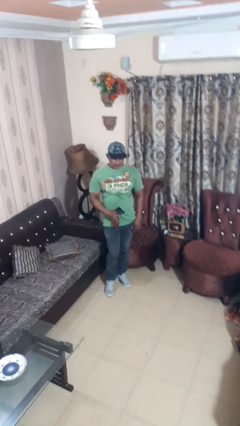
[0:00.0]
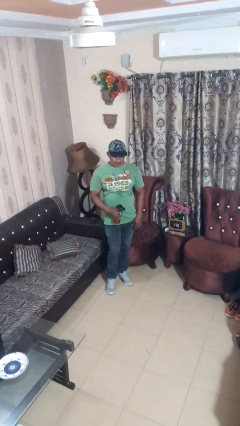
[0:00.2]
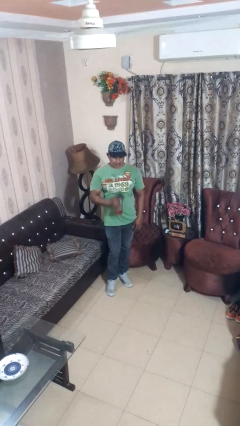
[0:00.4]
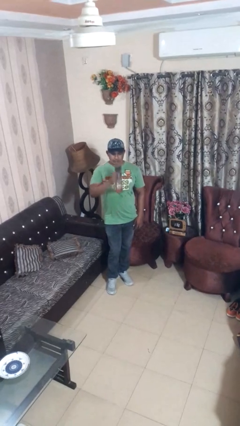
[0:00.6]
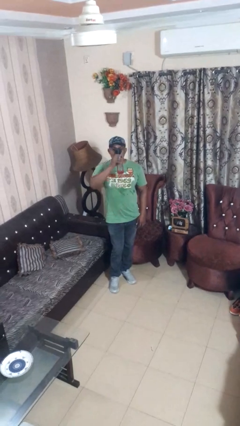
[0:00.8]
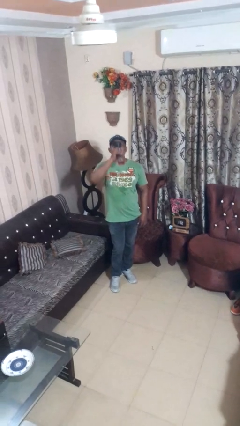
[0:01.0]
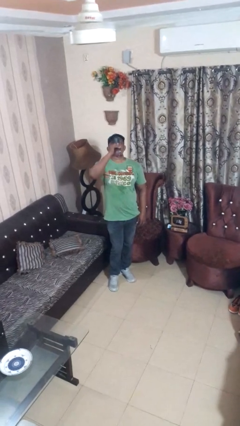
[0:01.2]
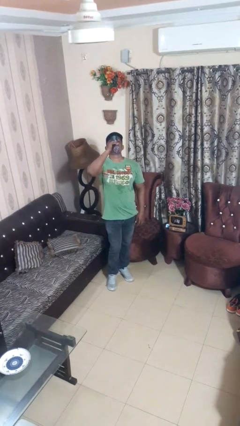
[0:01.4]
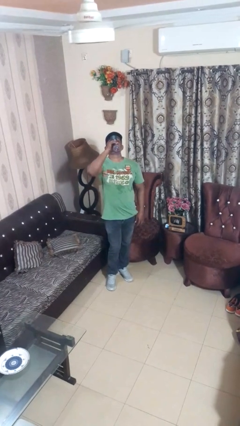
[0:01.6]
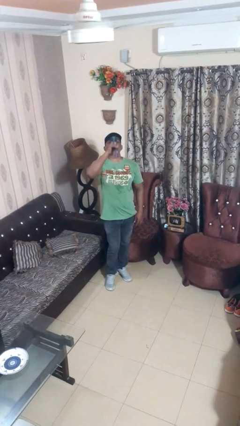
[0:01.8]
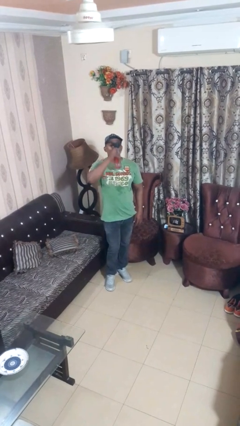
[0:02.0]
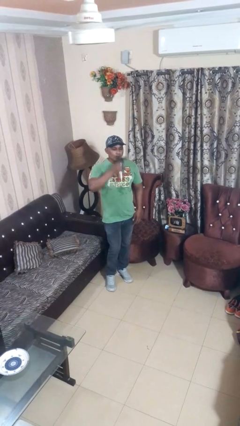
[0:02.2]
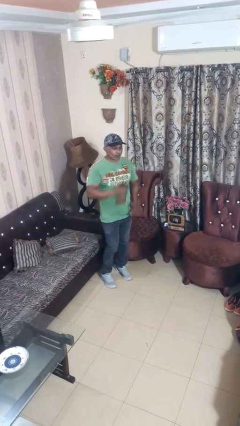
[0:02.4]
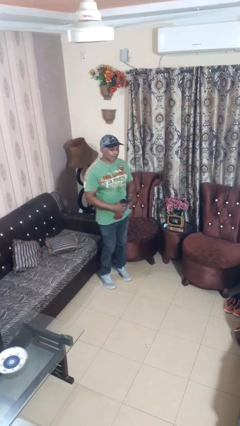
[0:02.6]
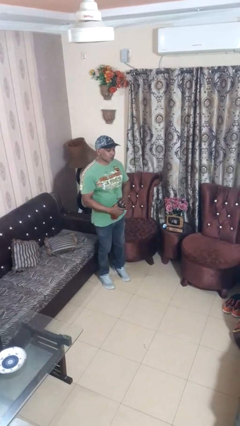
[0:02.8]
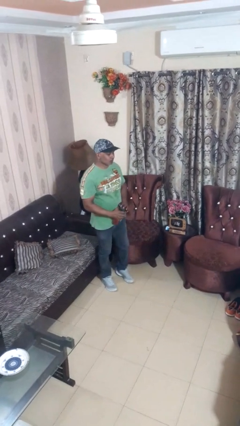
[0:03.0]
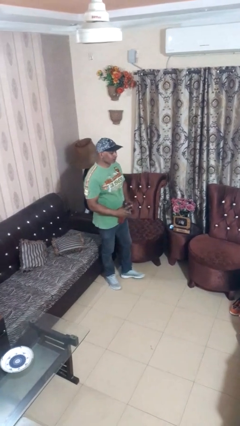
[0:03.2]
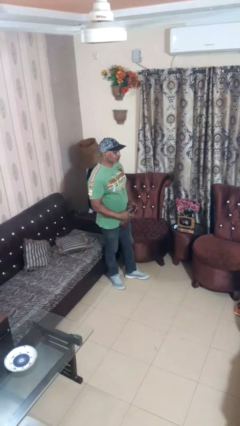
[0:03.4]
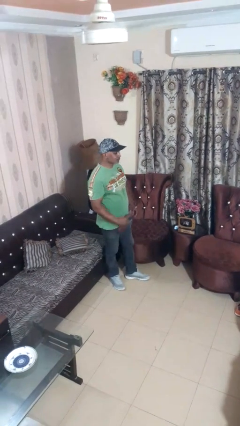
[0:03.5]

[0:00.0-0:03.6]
person drinks from beverage can

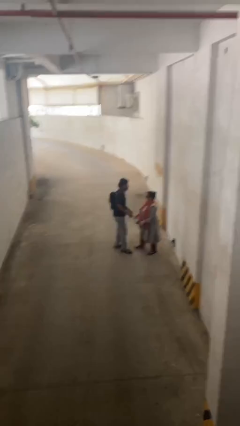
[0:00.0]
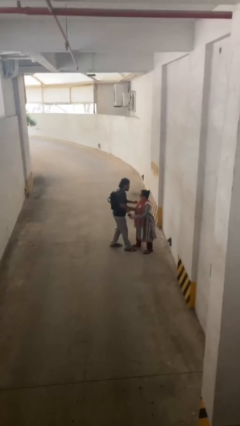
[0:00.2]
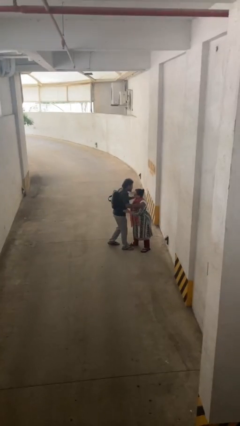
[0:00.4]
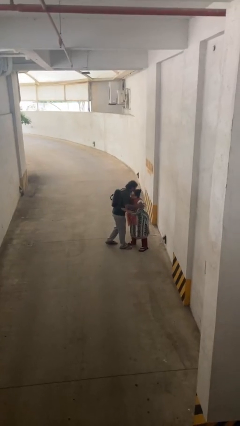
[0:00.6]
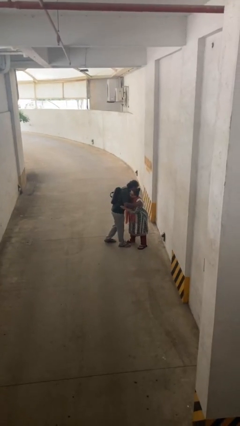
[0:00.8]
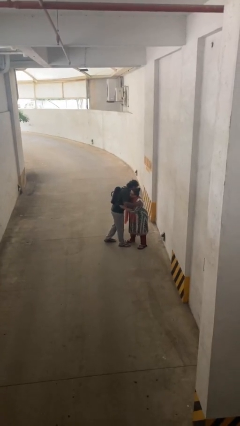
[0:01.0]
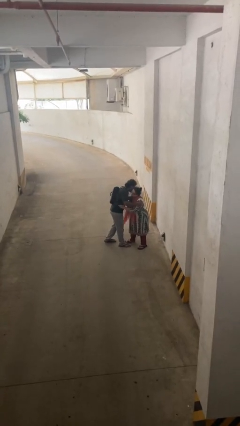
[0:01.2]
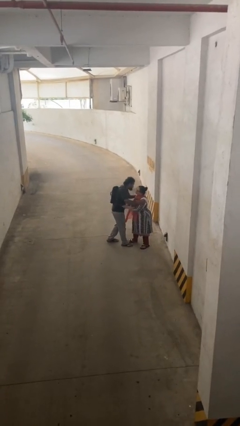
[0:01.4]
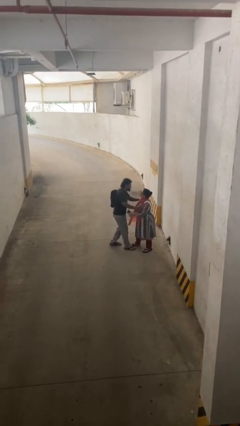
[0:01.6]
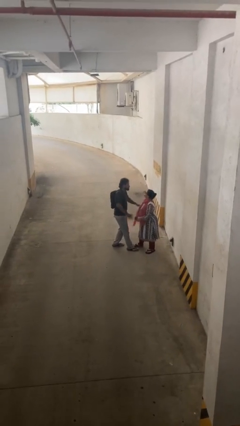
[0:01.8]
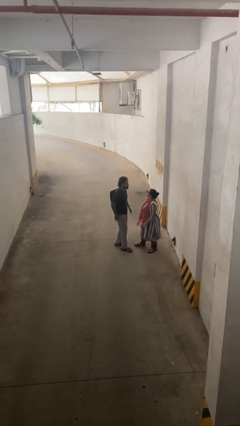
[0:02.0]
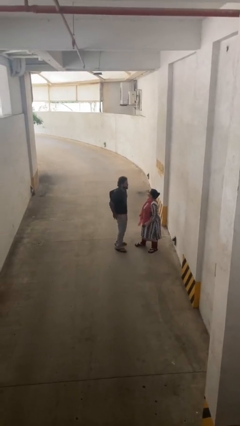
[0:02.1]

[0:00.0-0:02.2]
person embraces person

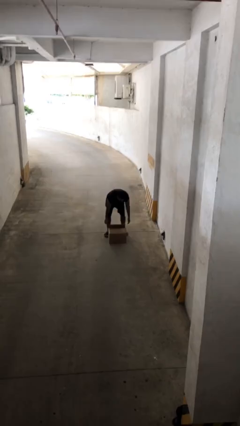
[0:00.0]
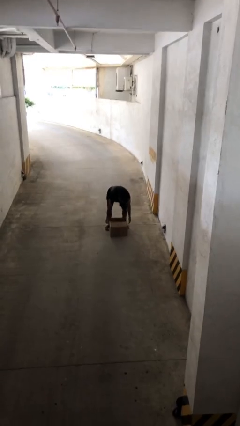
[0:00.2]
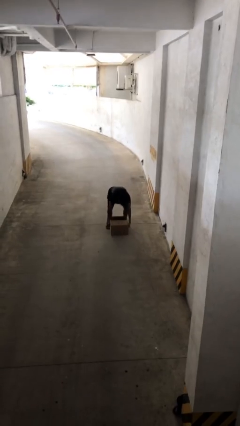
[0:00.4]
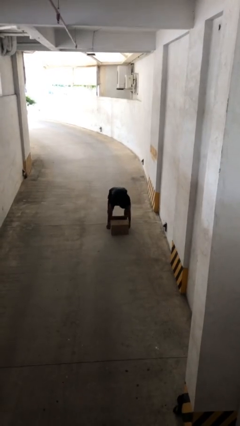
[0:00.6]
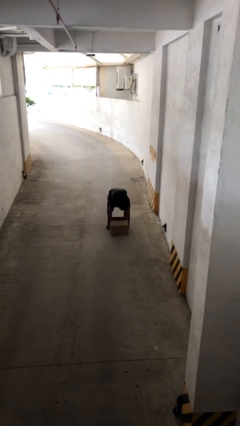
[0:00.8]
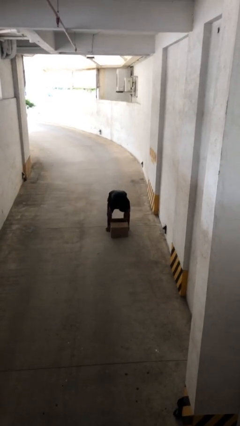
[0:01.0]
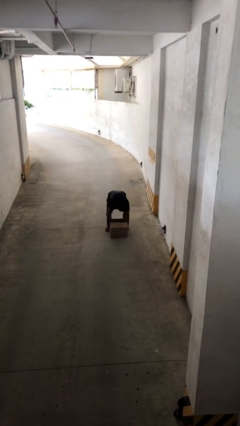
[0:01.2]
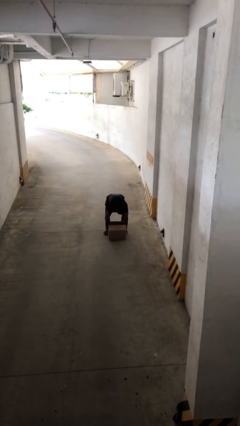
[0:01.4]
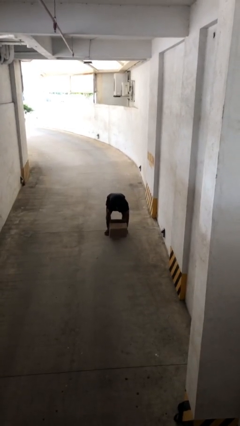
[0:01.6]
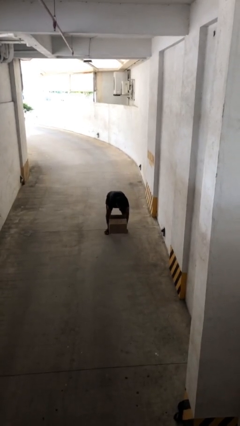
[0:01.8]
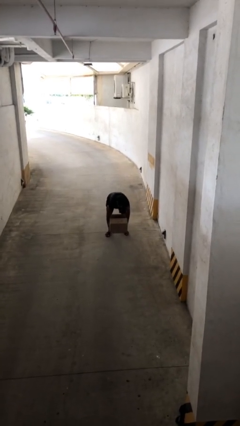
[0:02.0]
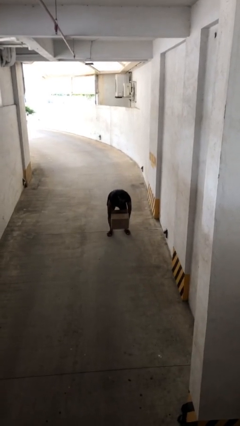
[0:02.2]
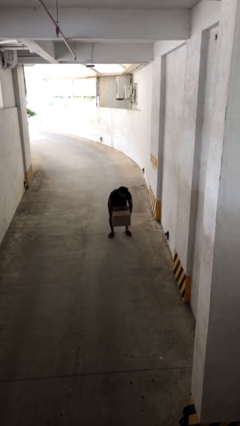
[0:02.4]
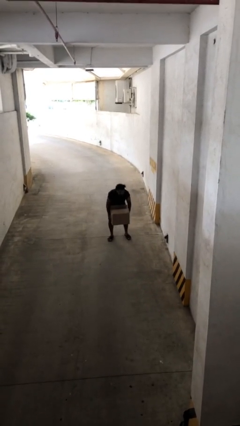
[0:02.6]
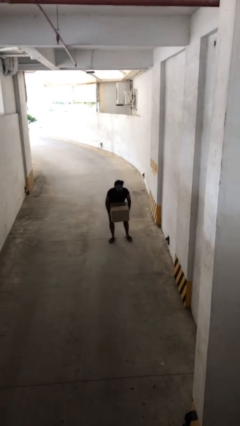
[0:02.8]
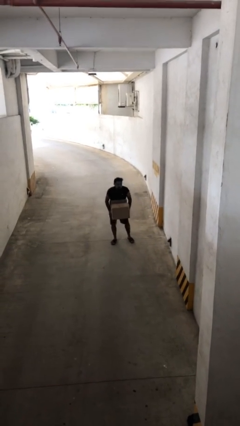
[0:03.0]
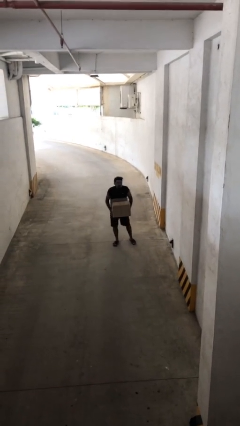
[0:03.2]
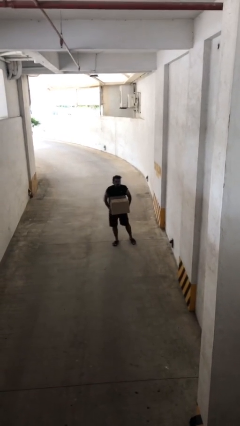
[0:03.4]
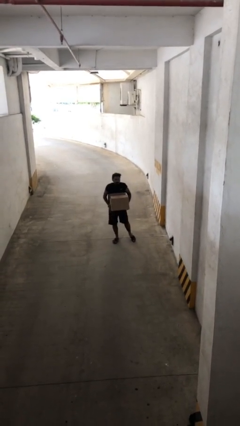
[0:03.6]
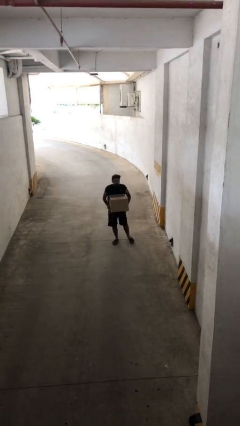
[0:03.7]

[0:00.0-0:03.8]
person picks up object from floor

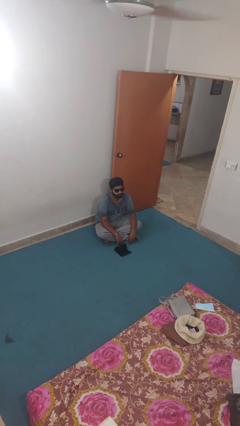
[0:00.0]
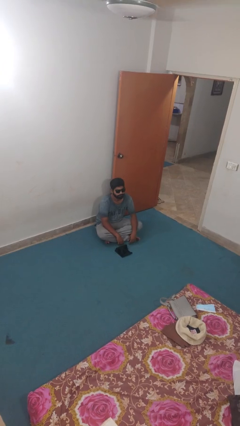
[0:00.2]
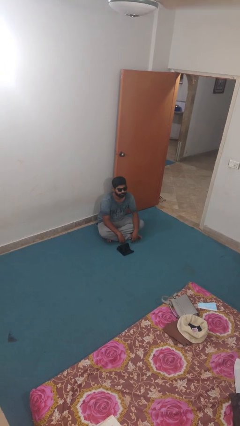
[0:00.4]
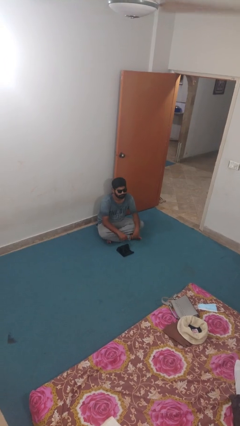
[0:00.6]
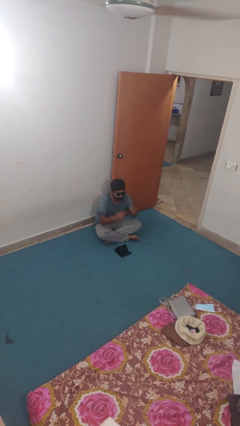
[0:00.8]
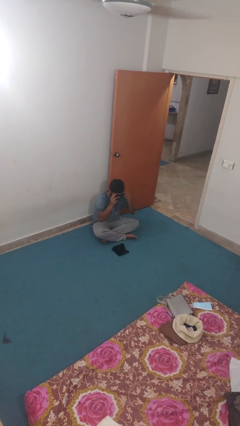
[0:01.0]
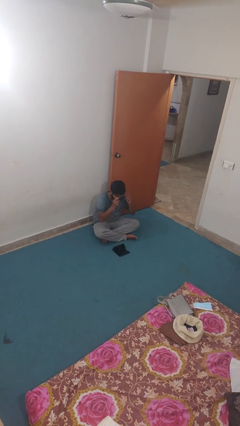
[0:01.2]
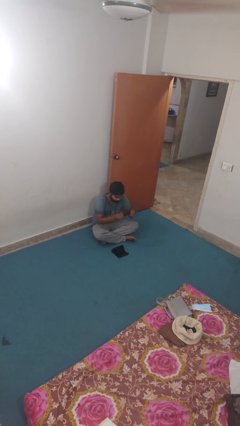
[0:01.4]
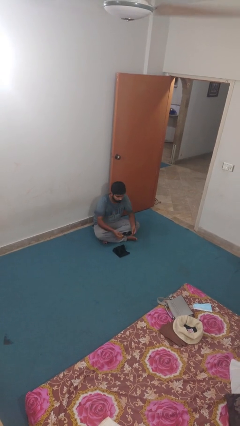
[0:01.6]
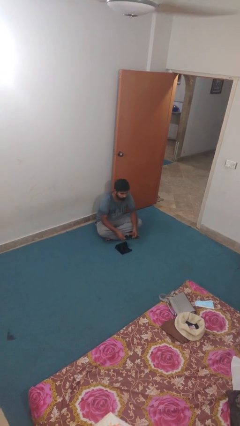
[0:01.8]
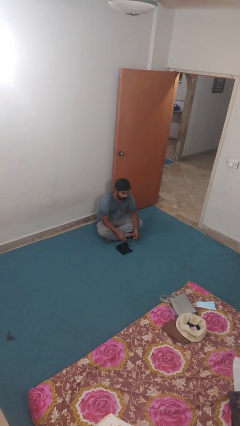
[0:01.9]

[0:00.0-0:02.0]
person takes off sunglasses

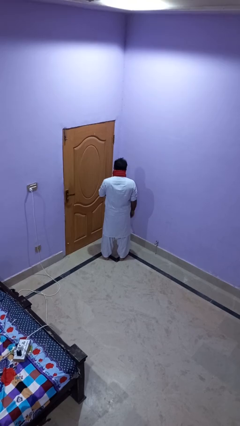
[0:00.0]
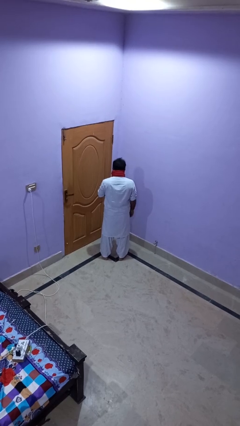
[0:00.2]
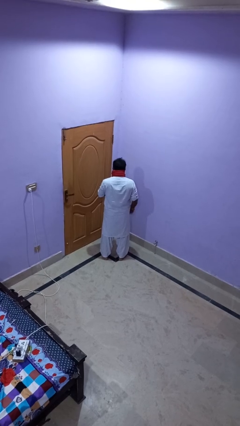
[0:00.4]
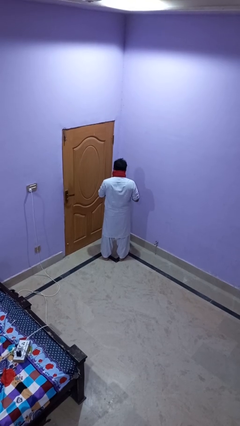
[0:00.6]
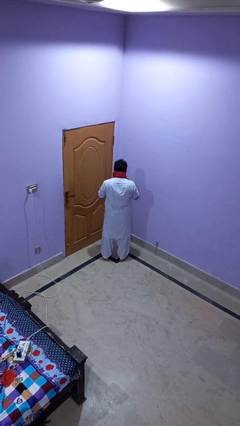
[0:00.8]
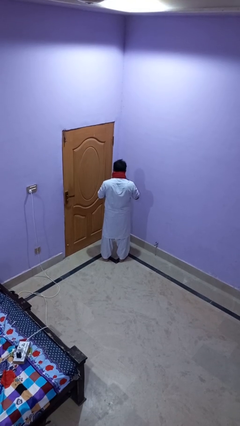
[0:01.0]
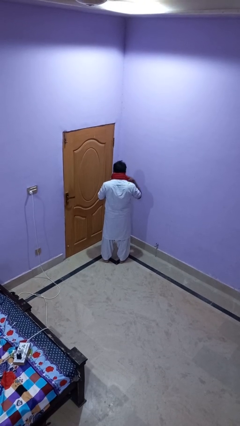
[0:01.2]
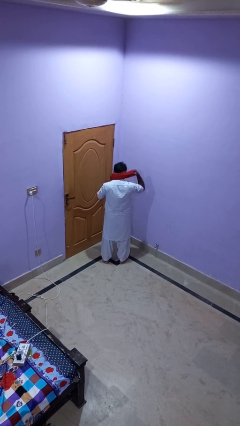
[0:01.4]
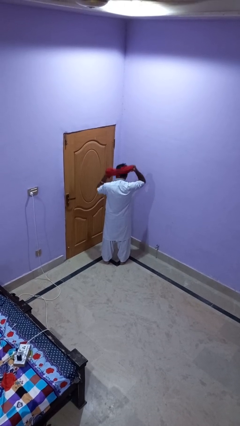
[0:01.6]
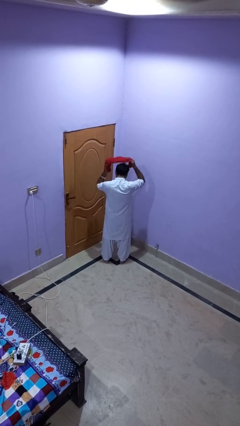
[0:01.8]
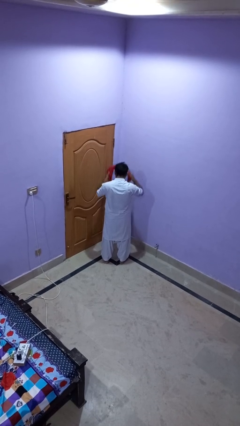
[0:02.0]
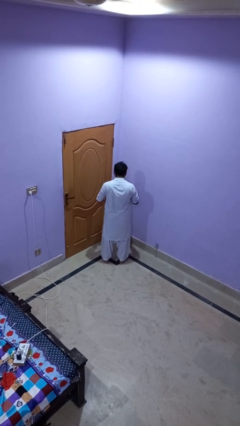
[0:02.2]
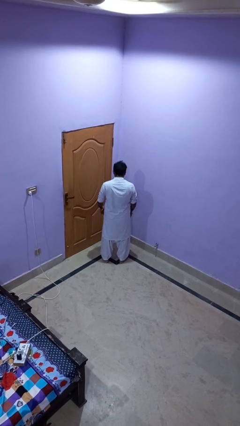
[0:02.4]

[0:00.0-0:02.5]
person takes off scarf

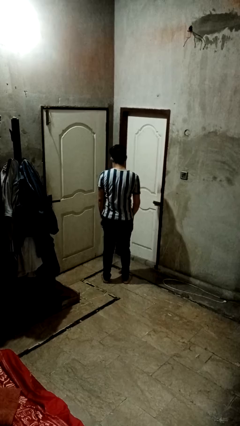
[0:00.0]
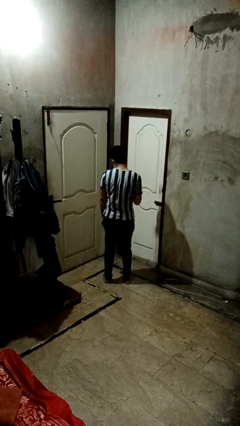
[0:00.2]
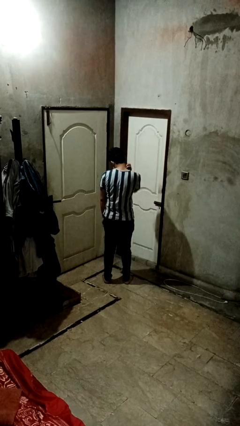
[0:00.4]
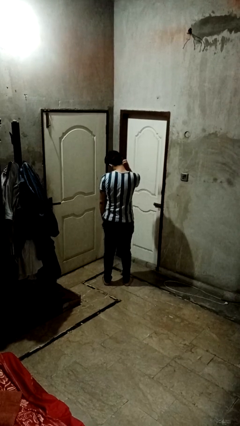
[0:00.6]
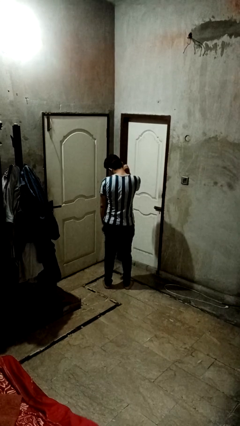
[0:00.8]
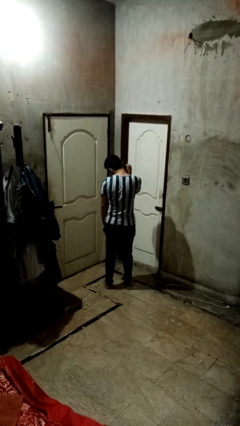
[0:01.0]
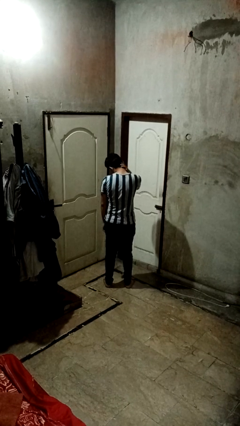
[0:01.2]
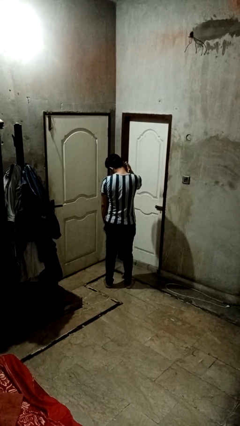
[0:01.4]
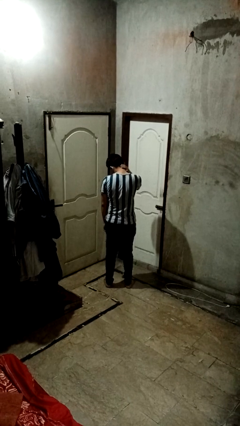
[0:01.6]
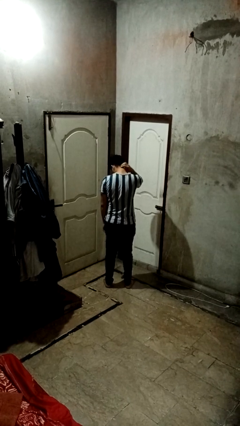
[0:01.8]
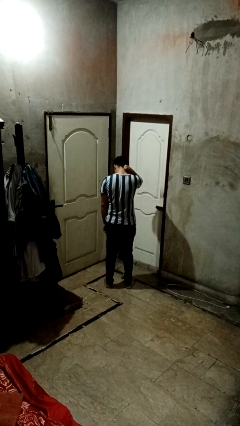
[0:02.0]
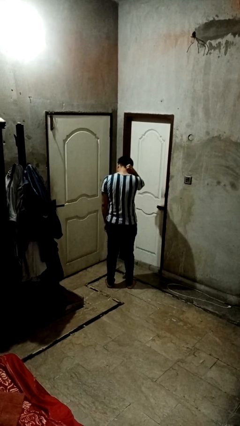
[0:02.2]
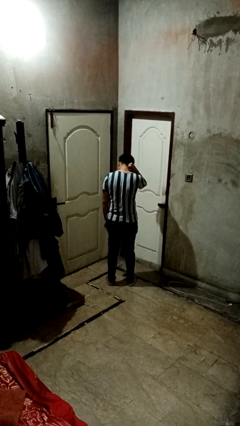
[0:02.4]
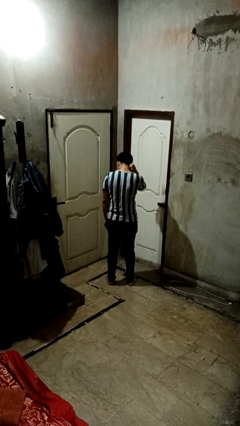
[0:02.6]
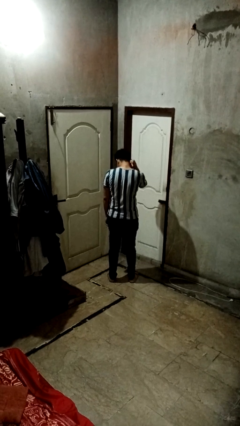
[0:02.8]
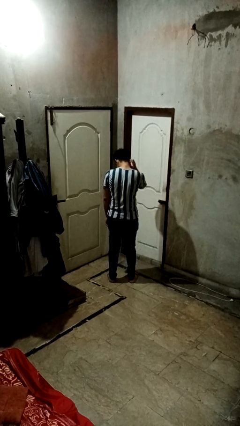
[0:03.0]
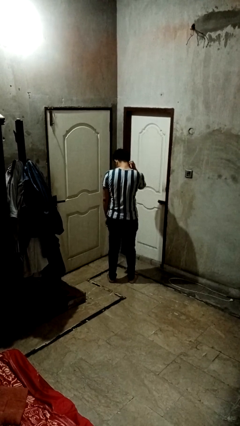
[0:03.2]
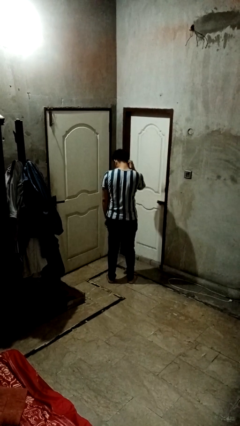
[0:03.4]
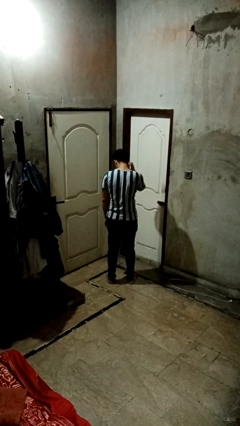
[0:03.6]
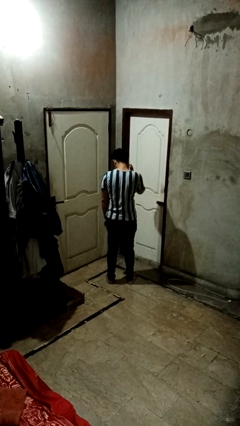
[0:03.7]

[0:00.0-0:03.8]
person swats bug

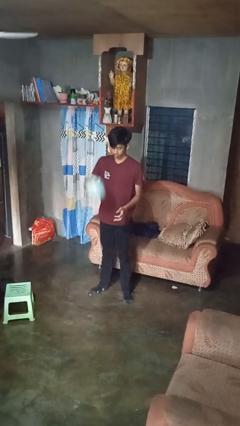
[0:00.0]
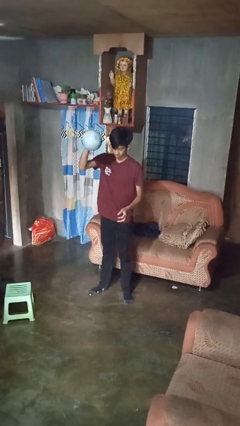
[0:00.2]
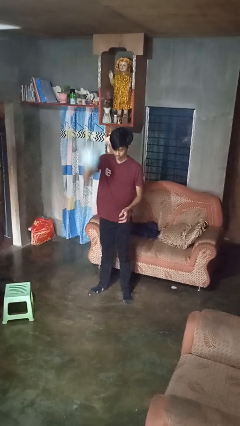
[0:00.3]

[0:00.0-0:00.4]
person bounces ball on floor
